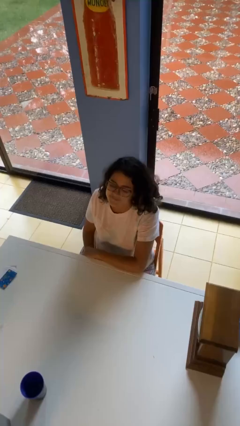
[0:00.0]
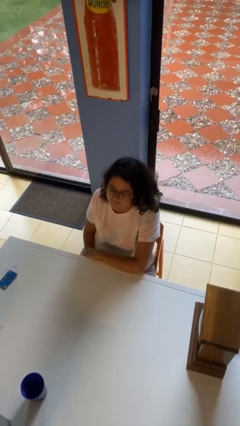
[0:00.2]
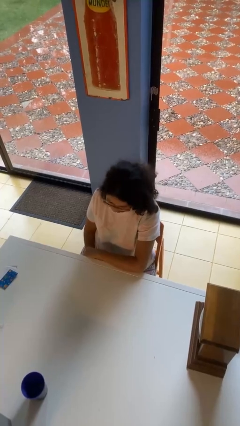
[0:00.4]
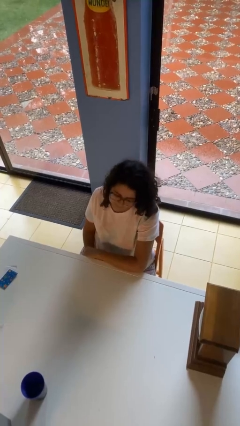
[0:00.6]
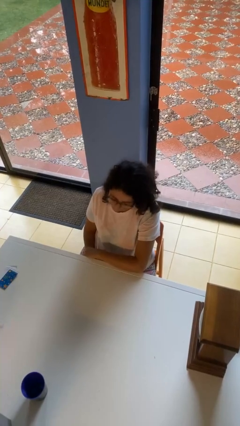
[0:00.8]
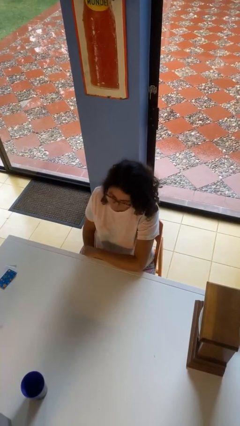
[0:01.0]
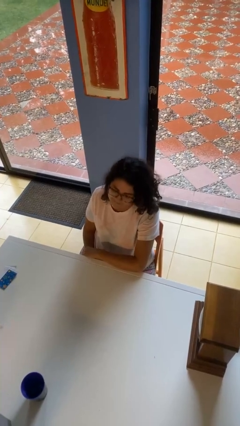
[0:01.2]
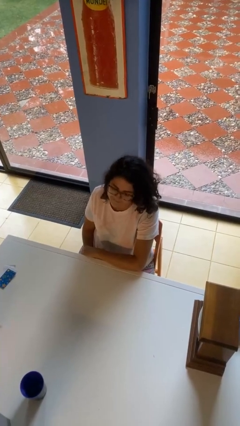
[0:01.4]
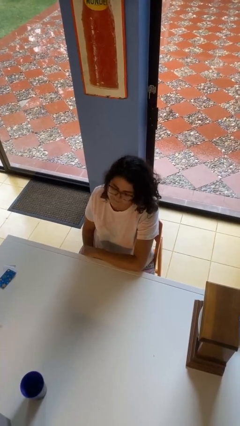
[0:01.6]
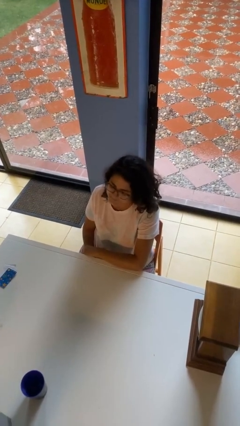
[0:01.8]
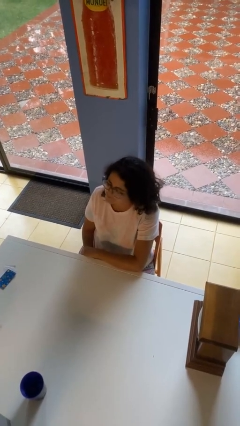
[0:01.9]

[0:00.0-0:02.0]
person nods head

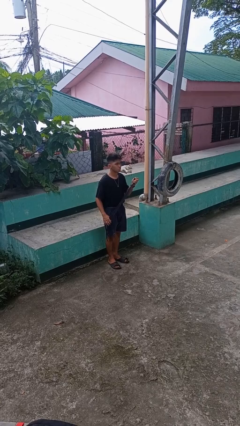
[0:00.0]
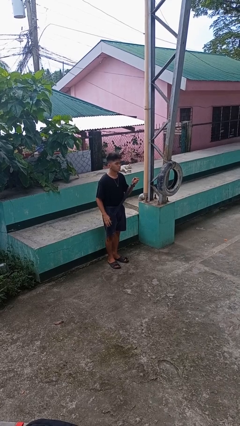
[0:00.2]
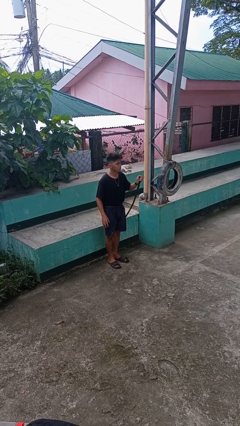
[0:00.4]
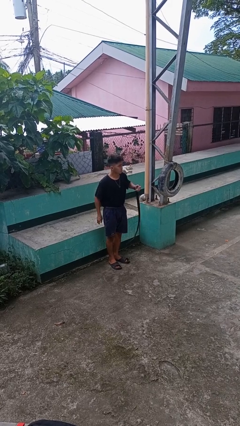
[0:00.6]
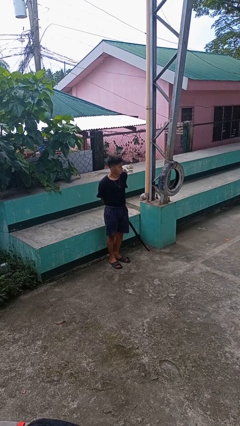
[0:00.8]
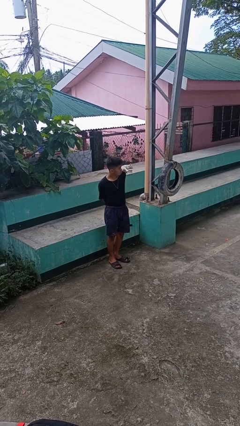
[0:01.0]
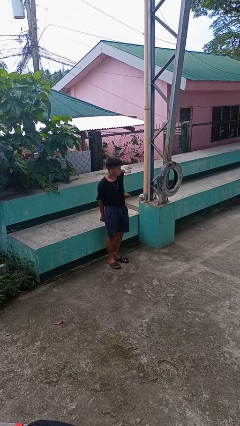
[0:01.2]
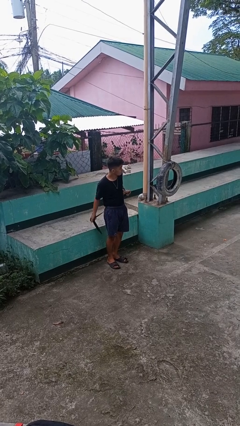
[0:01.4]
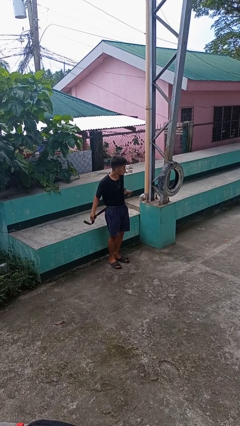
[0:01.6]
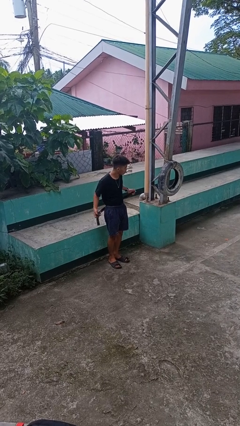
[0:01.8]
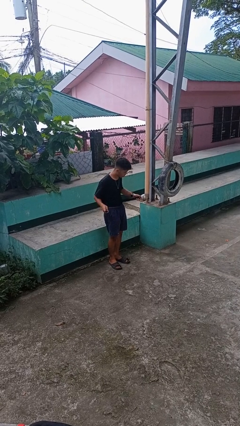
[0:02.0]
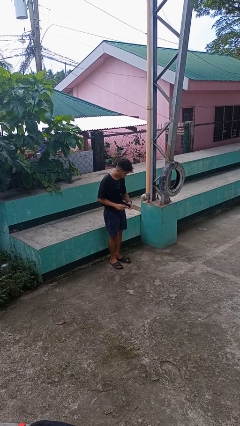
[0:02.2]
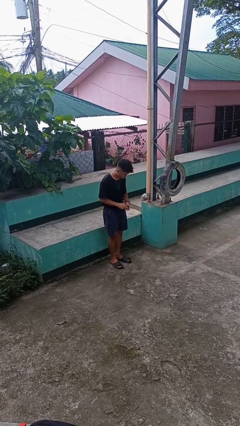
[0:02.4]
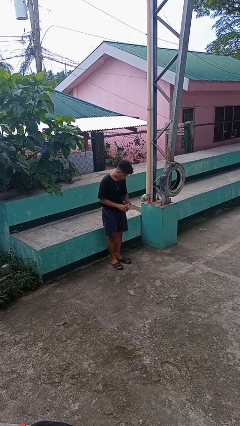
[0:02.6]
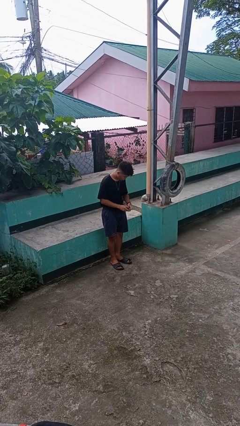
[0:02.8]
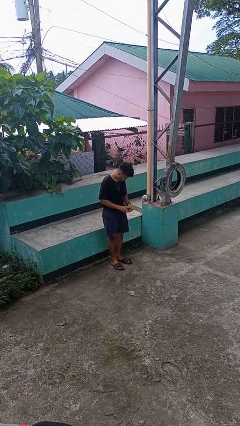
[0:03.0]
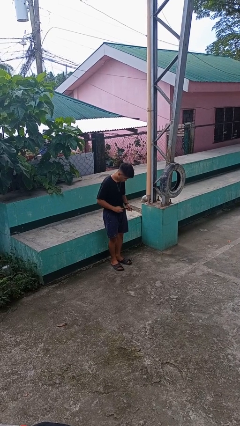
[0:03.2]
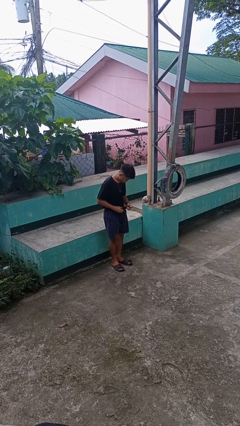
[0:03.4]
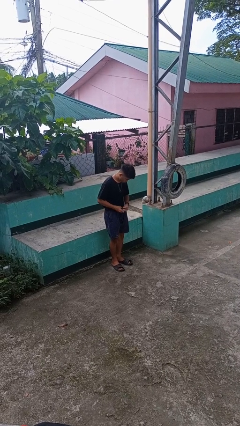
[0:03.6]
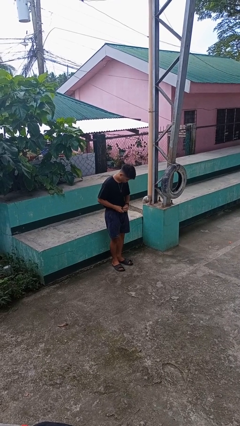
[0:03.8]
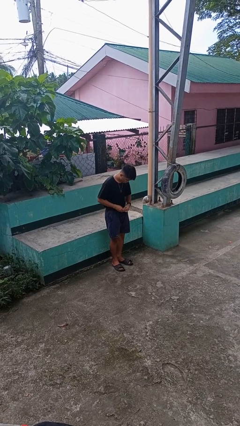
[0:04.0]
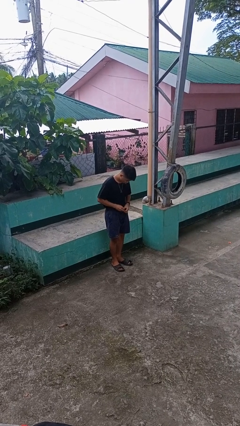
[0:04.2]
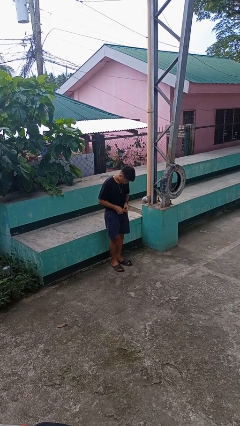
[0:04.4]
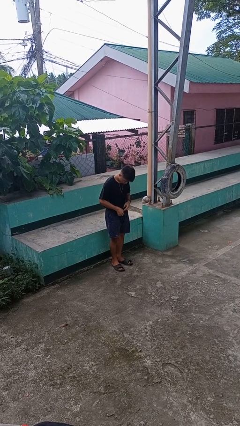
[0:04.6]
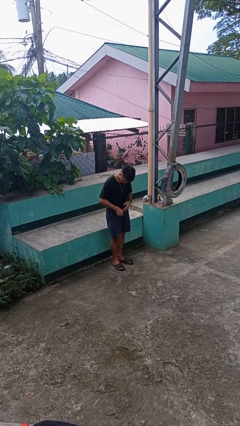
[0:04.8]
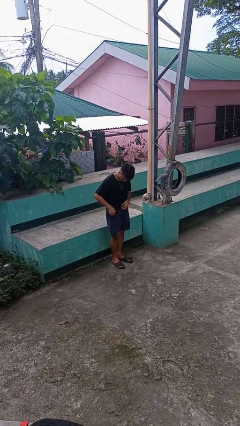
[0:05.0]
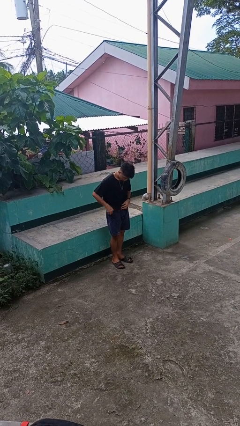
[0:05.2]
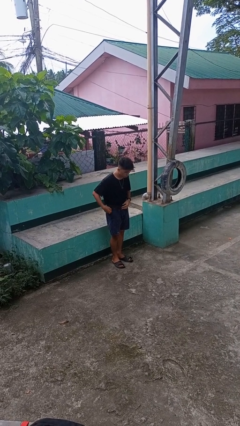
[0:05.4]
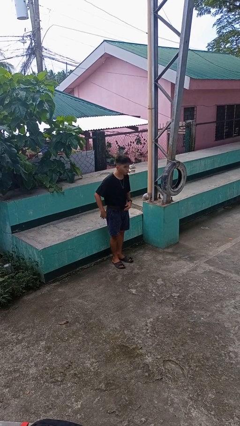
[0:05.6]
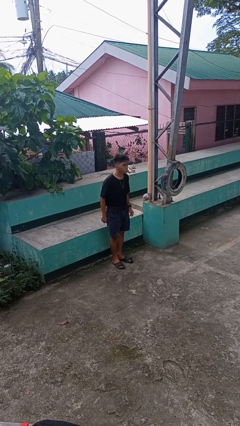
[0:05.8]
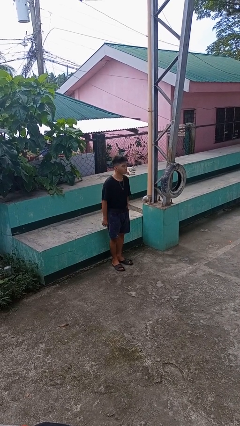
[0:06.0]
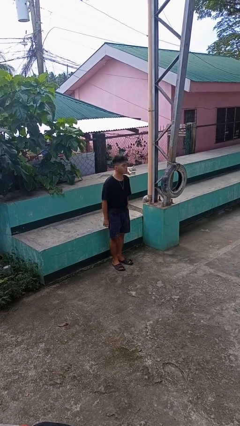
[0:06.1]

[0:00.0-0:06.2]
person puts on belt

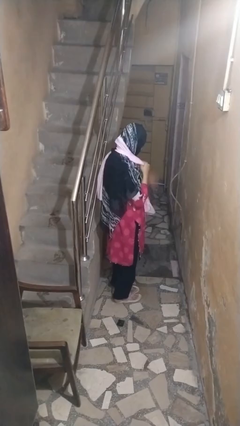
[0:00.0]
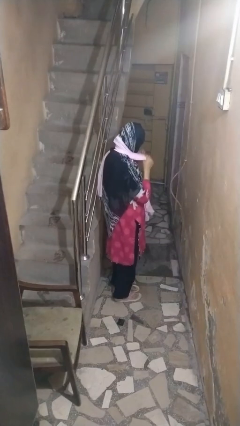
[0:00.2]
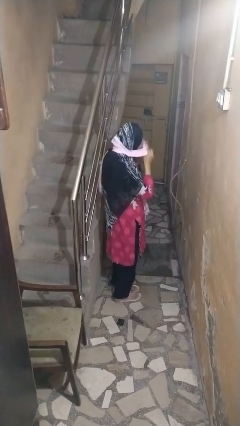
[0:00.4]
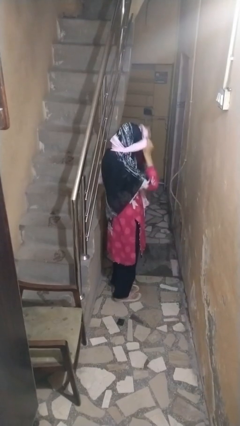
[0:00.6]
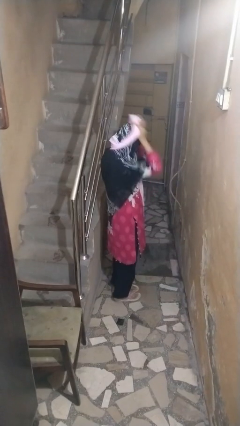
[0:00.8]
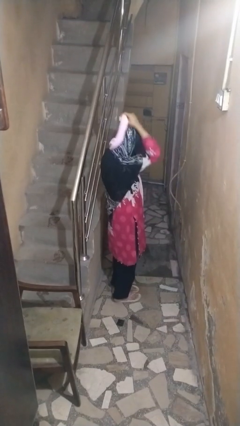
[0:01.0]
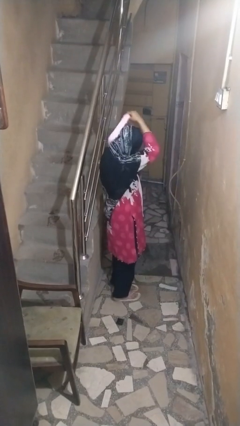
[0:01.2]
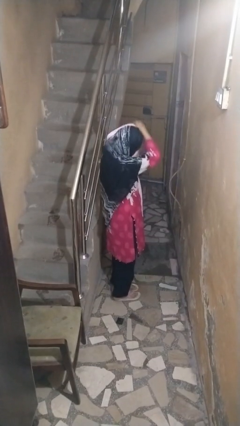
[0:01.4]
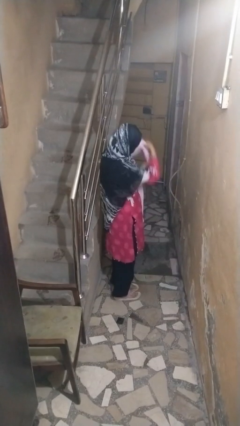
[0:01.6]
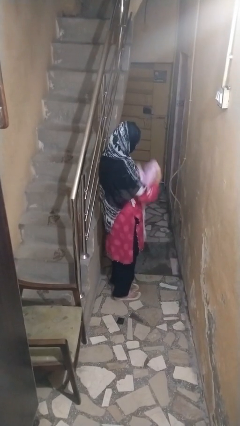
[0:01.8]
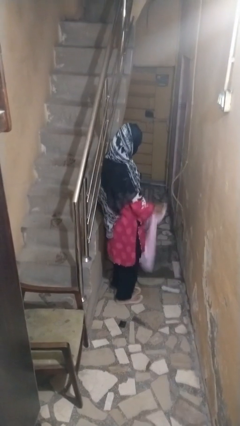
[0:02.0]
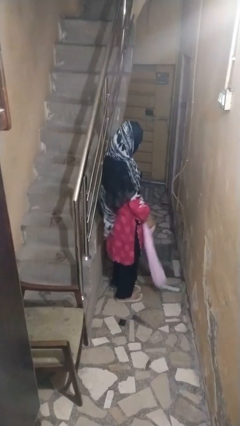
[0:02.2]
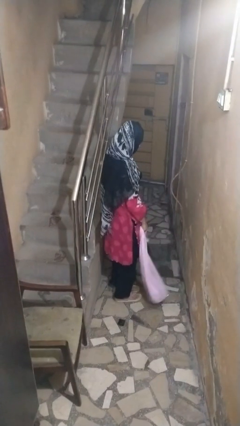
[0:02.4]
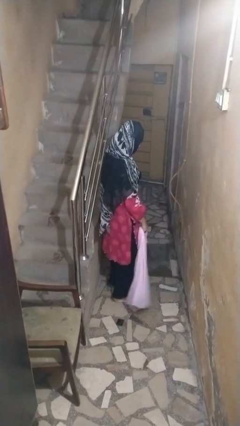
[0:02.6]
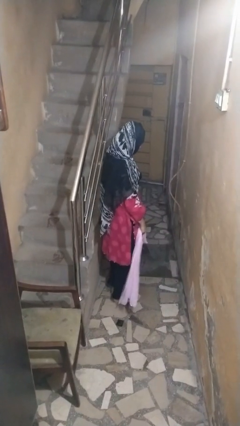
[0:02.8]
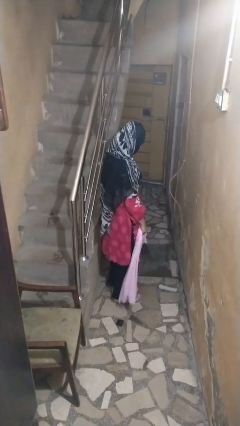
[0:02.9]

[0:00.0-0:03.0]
person takes off scarf

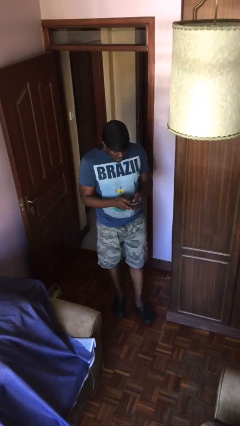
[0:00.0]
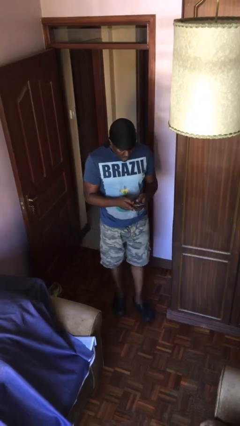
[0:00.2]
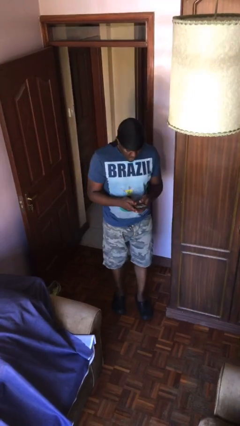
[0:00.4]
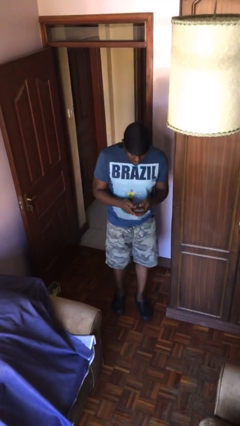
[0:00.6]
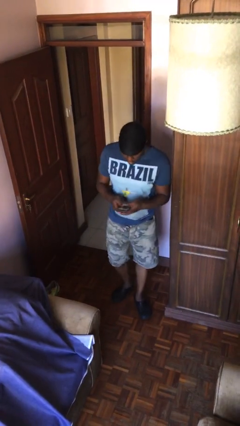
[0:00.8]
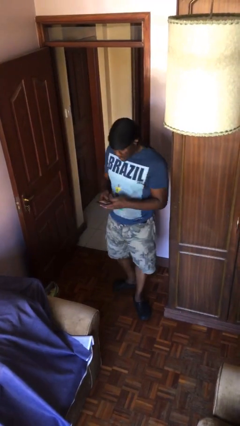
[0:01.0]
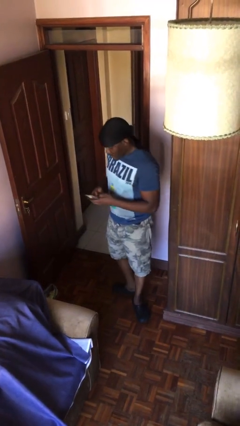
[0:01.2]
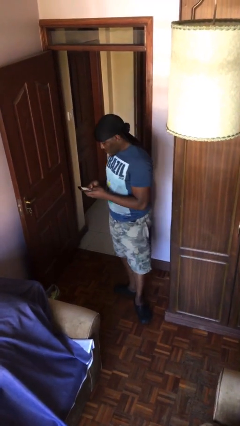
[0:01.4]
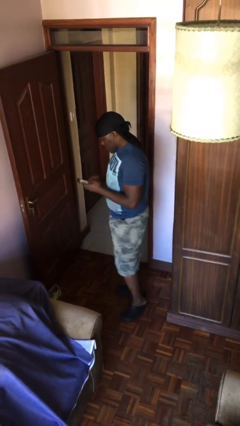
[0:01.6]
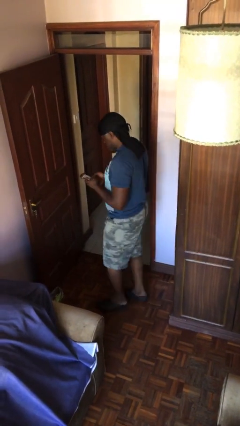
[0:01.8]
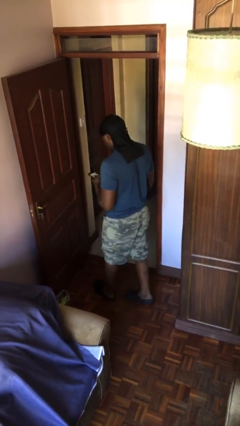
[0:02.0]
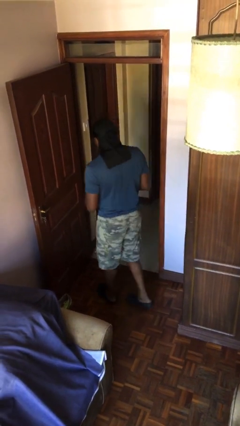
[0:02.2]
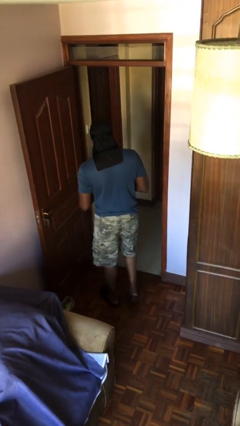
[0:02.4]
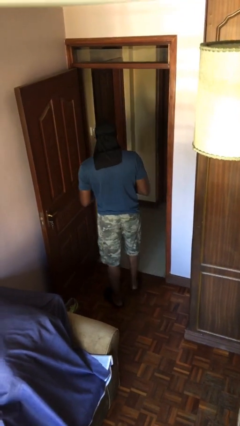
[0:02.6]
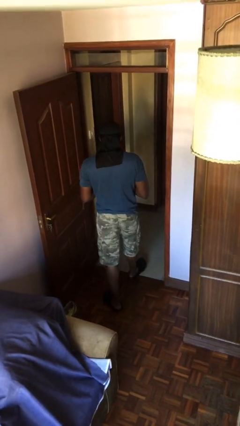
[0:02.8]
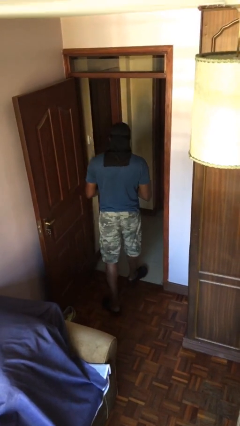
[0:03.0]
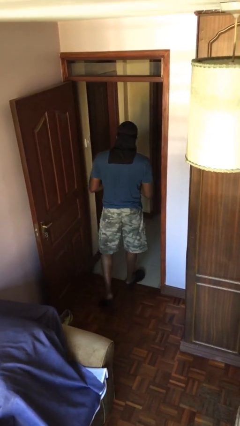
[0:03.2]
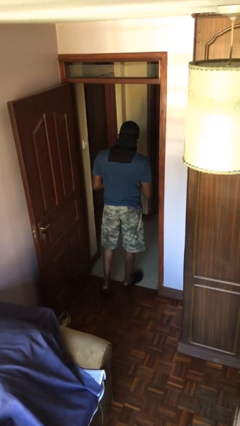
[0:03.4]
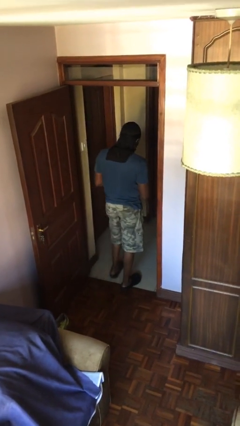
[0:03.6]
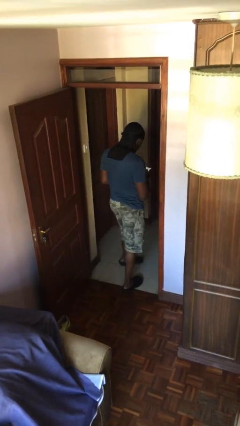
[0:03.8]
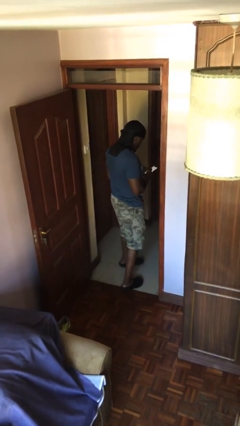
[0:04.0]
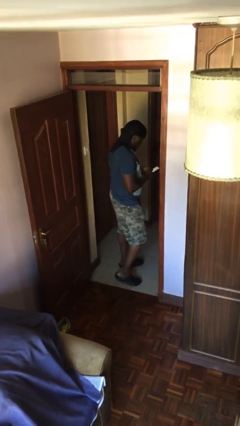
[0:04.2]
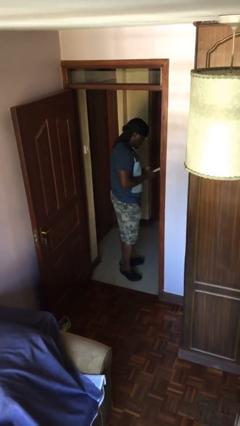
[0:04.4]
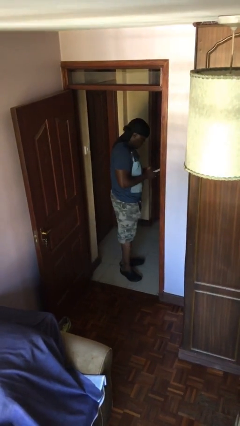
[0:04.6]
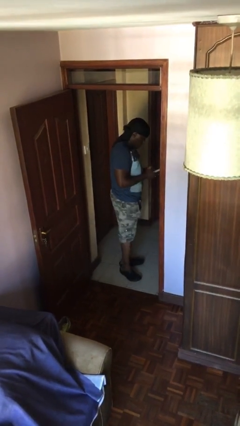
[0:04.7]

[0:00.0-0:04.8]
person exits scene through structure

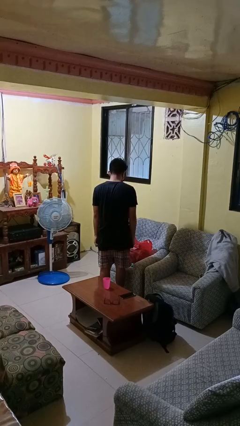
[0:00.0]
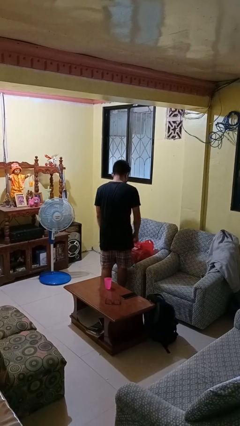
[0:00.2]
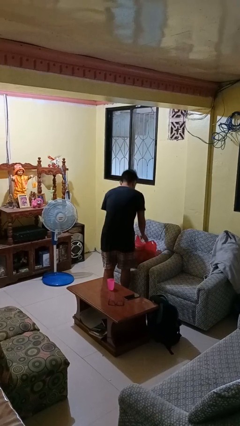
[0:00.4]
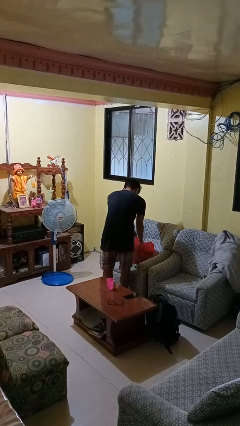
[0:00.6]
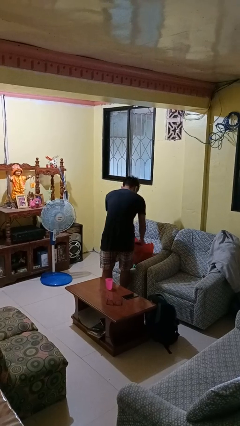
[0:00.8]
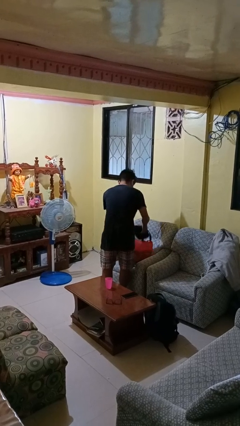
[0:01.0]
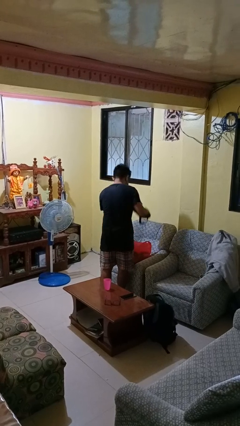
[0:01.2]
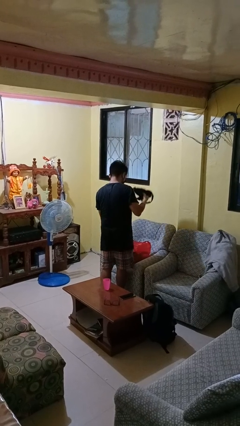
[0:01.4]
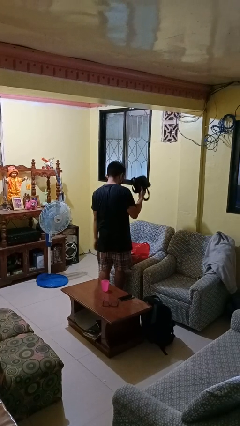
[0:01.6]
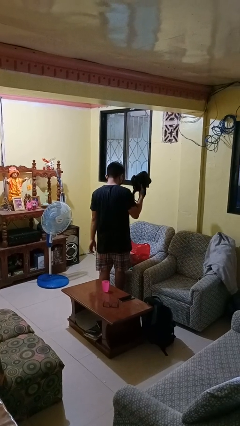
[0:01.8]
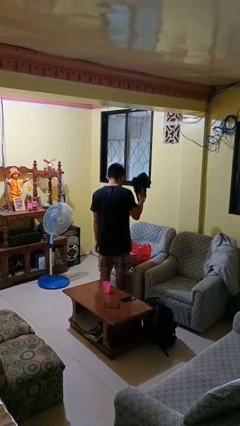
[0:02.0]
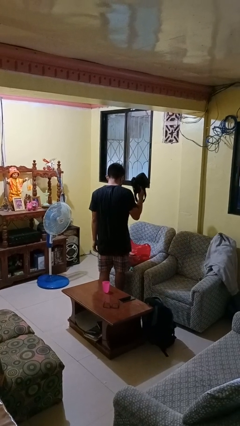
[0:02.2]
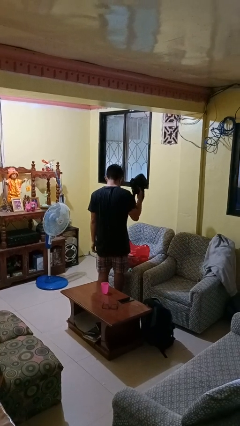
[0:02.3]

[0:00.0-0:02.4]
person takes object from bag
